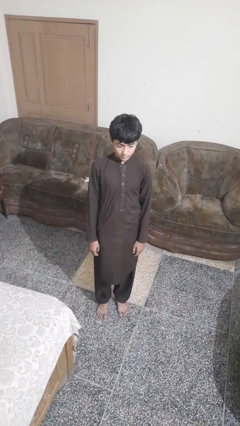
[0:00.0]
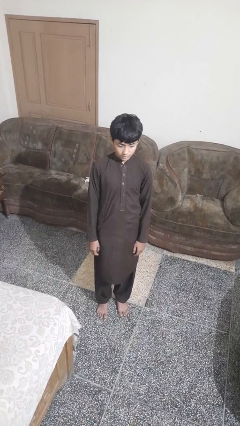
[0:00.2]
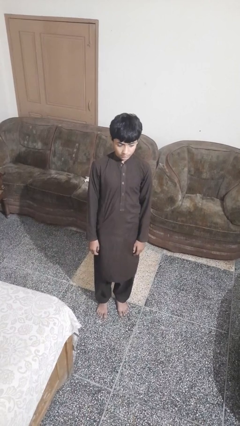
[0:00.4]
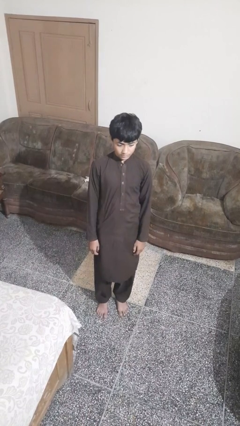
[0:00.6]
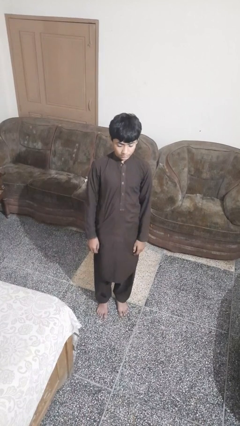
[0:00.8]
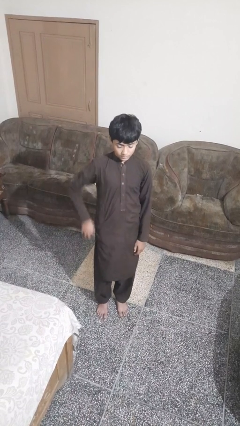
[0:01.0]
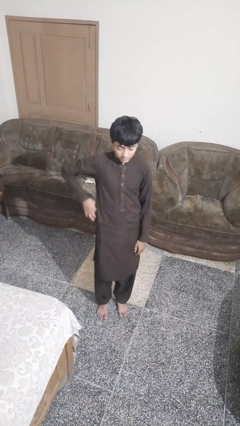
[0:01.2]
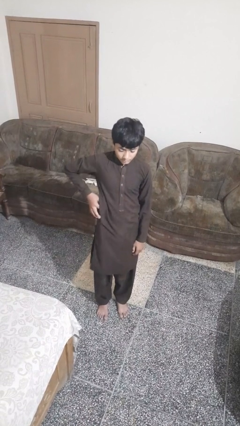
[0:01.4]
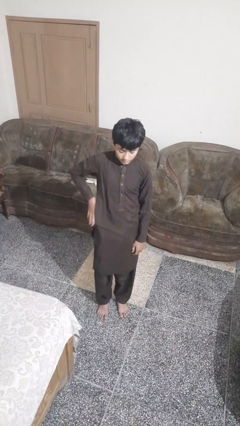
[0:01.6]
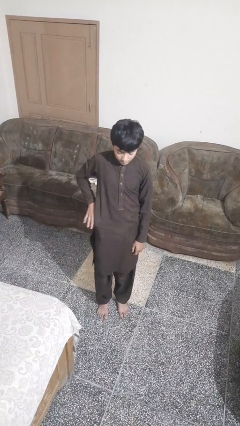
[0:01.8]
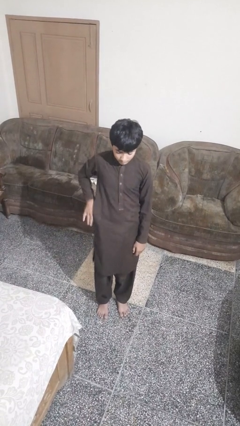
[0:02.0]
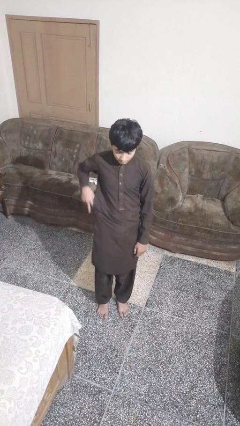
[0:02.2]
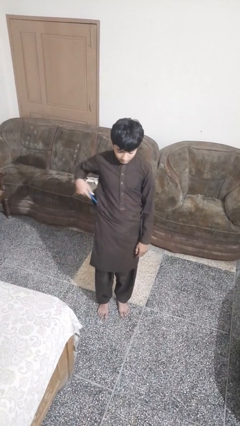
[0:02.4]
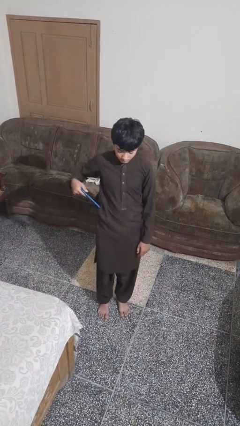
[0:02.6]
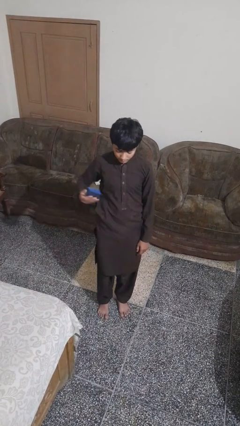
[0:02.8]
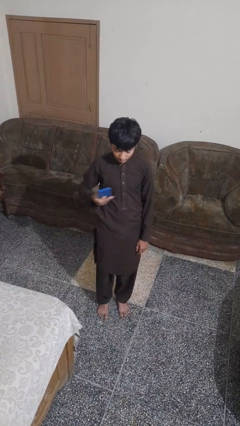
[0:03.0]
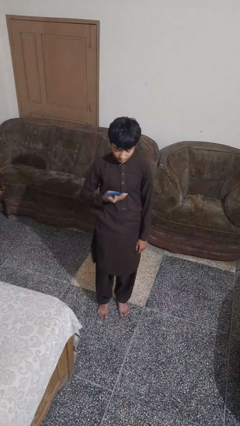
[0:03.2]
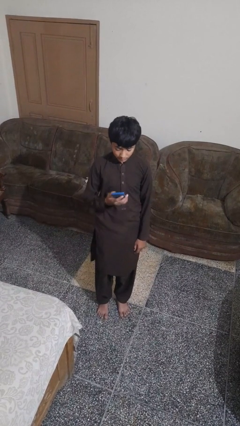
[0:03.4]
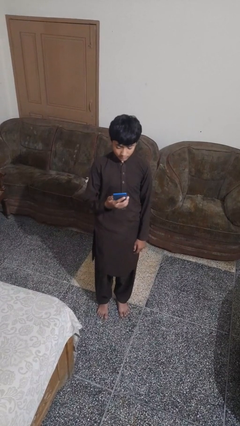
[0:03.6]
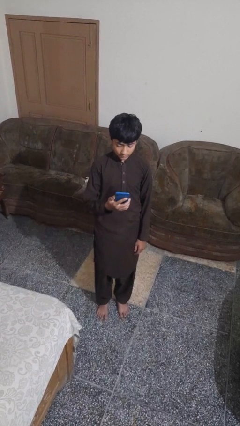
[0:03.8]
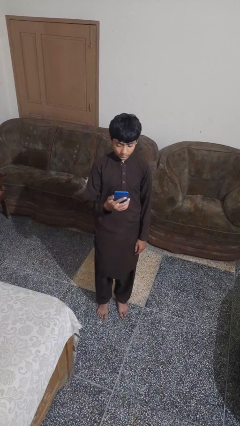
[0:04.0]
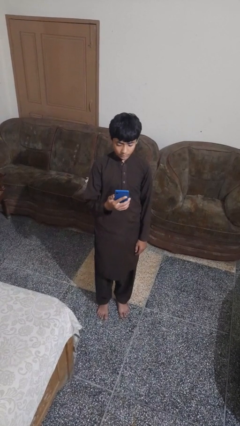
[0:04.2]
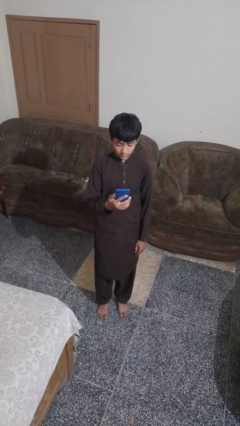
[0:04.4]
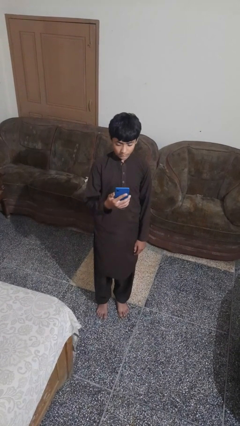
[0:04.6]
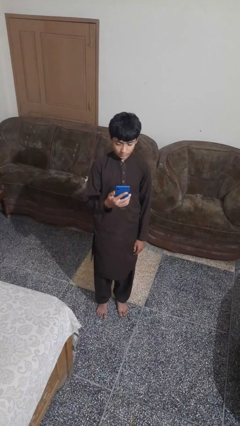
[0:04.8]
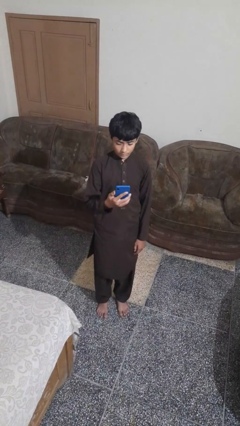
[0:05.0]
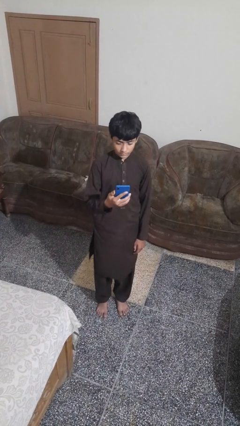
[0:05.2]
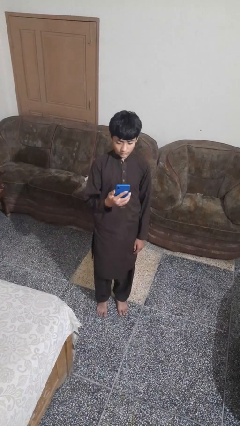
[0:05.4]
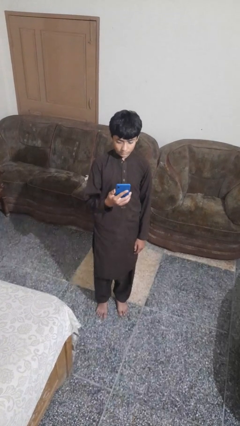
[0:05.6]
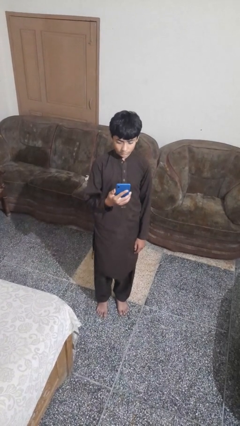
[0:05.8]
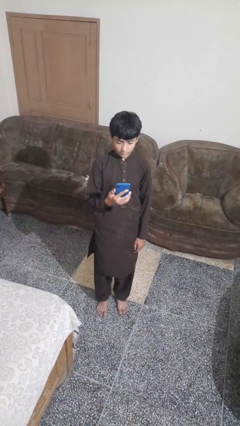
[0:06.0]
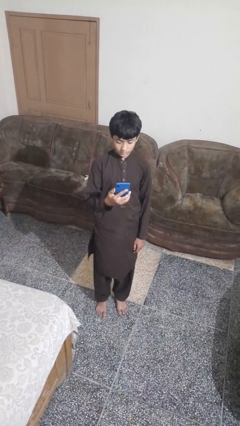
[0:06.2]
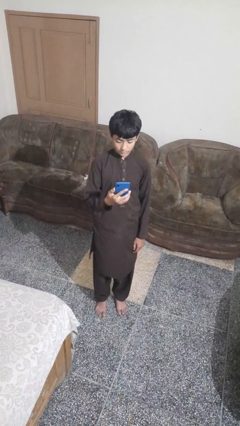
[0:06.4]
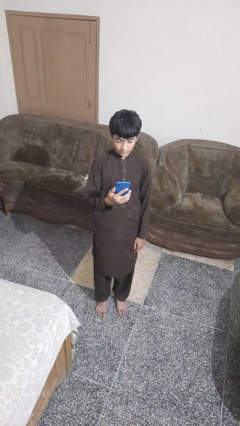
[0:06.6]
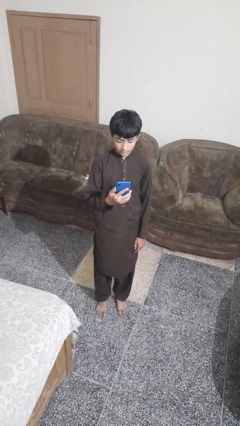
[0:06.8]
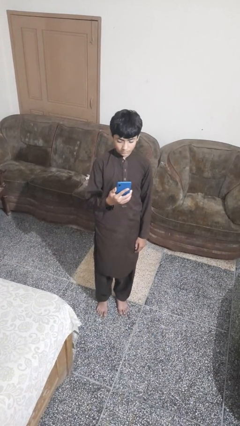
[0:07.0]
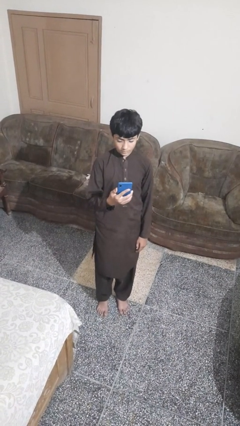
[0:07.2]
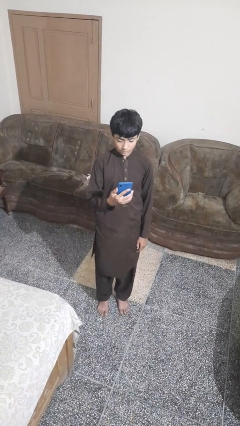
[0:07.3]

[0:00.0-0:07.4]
person takes phone from pocket

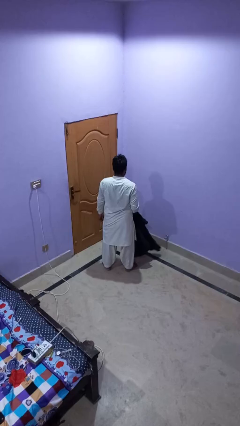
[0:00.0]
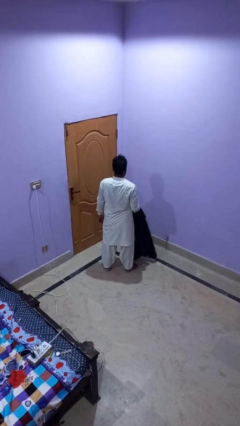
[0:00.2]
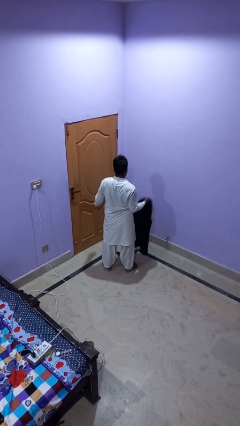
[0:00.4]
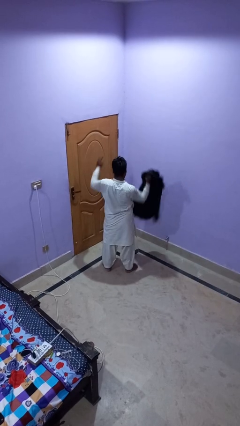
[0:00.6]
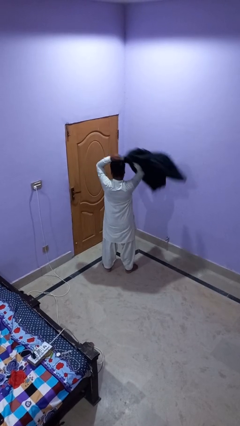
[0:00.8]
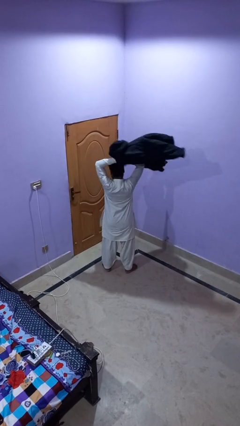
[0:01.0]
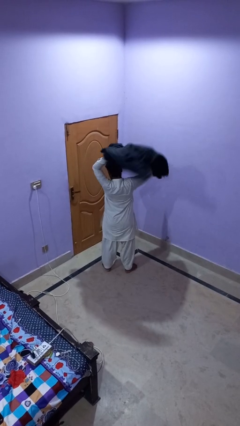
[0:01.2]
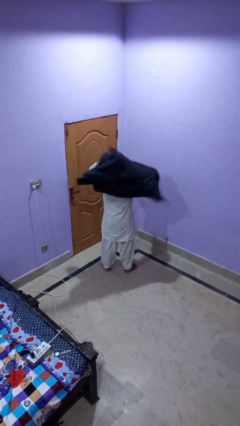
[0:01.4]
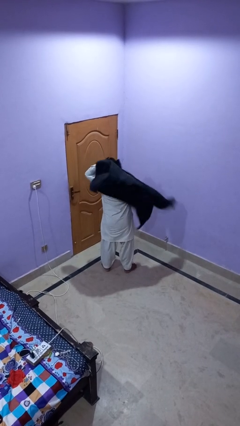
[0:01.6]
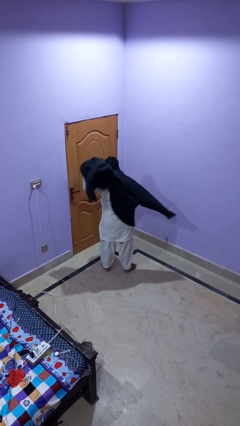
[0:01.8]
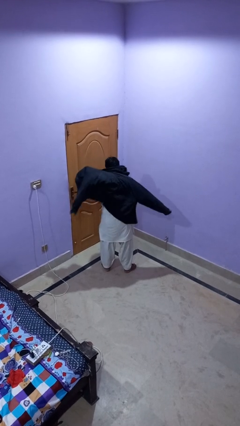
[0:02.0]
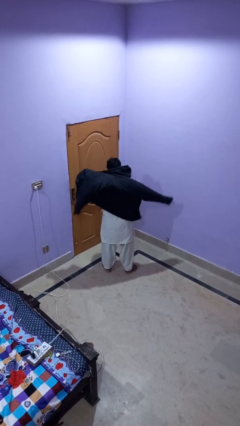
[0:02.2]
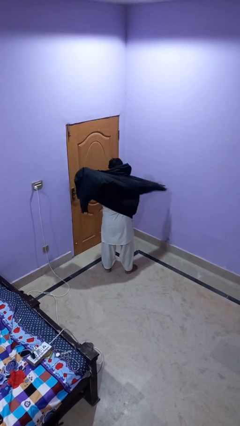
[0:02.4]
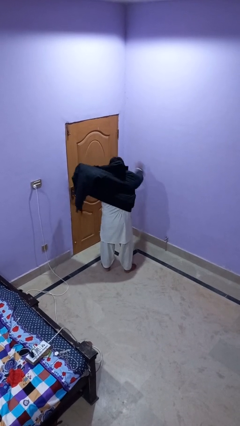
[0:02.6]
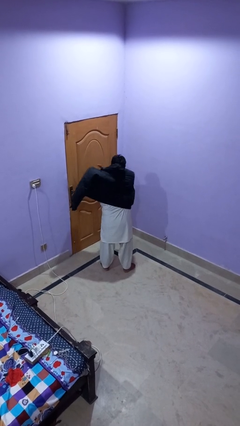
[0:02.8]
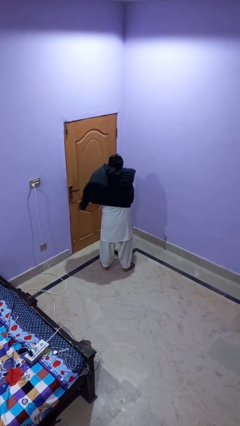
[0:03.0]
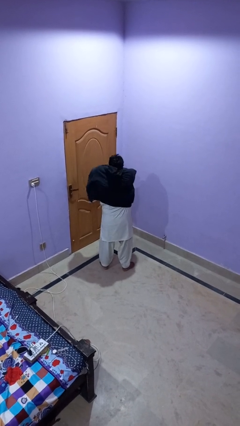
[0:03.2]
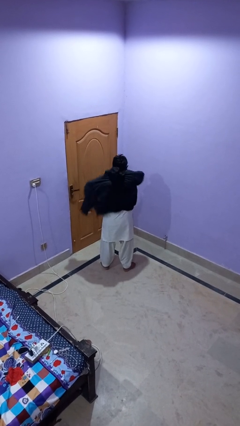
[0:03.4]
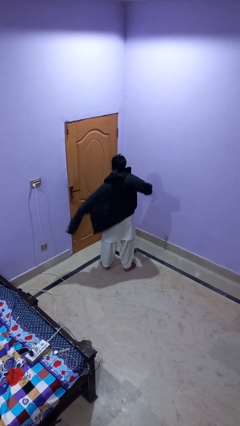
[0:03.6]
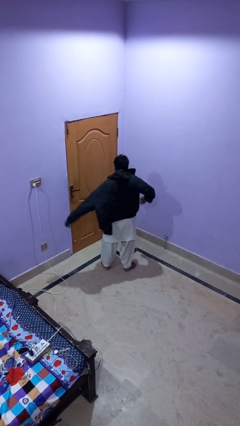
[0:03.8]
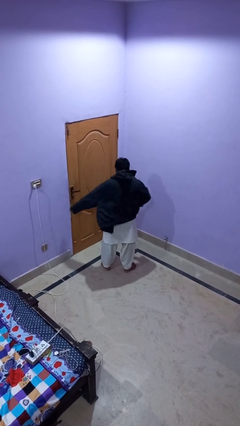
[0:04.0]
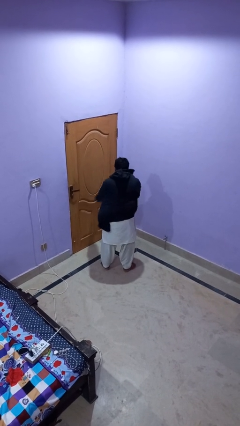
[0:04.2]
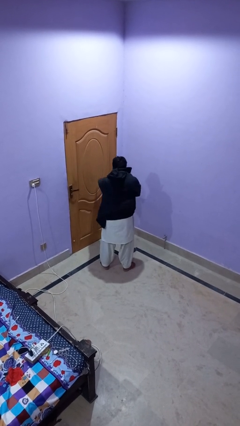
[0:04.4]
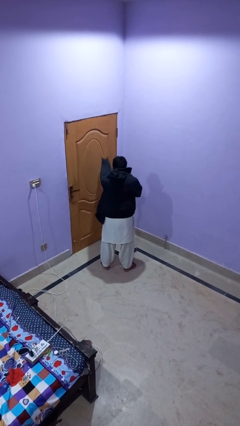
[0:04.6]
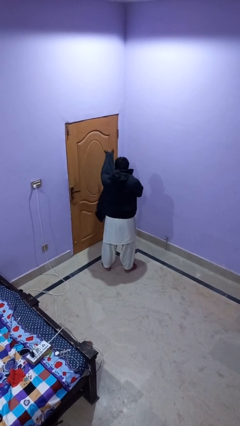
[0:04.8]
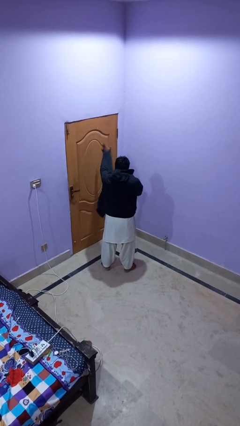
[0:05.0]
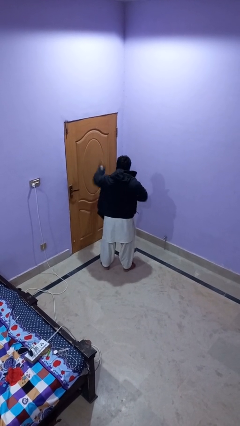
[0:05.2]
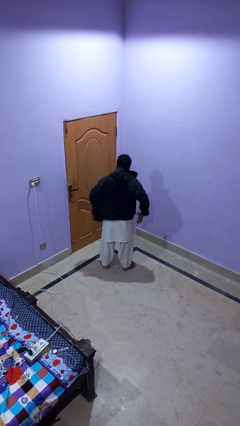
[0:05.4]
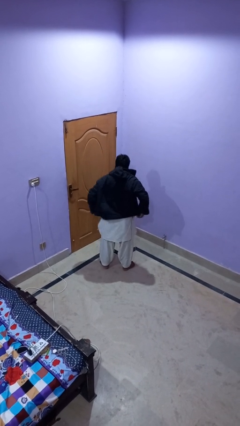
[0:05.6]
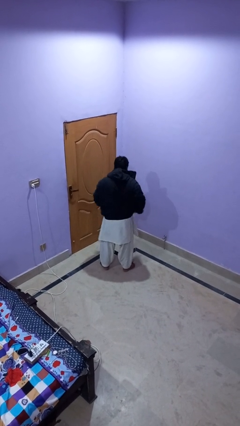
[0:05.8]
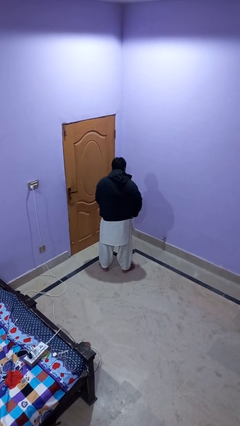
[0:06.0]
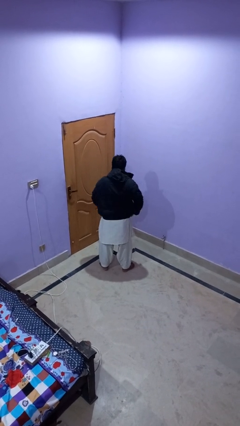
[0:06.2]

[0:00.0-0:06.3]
person puts on jacket

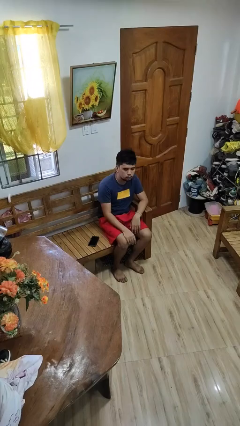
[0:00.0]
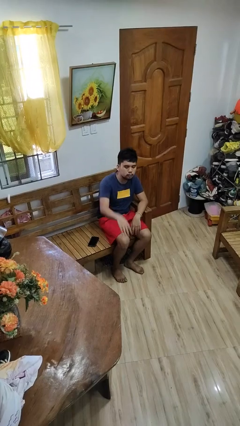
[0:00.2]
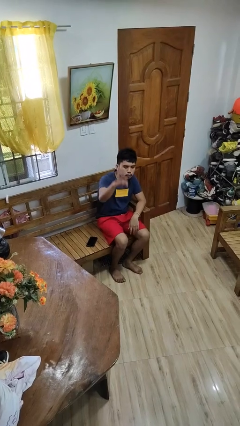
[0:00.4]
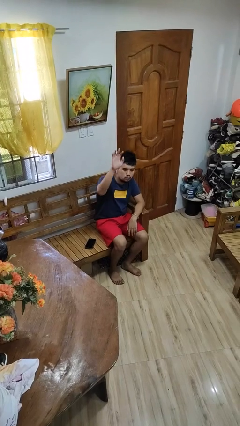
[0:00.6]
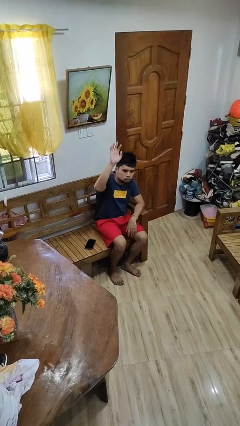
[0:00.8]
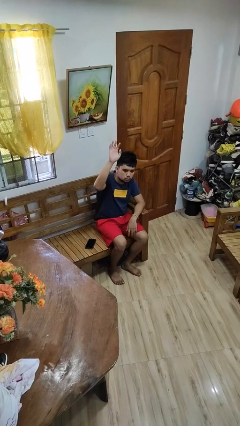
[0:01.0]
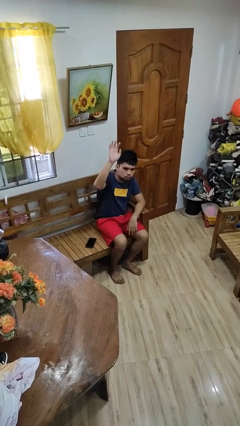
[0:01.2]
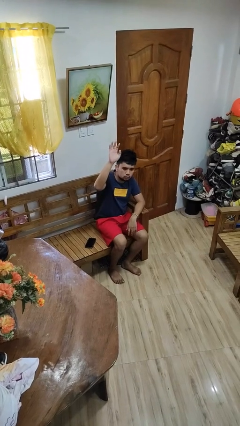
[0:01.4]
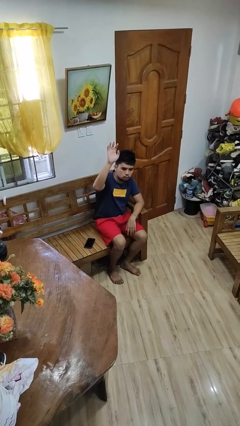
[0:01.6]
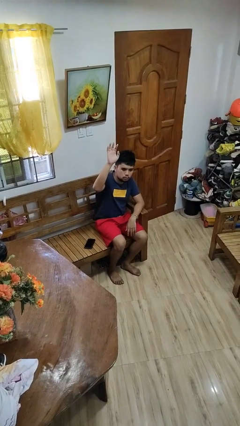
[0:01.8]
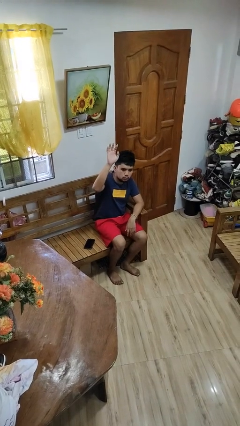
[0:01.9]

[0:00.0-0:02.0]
person gestures raise hand

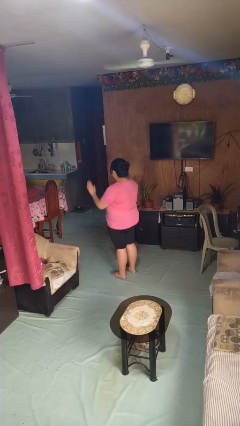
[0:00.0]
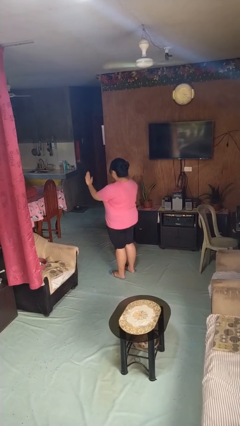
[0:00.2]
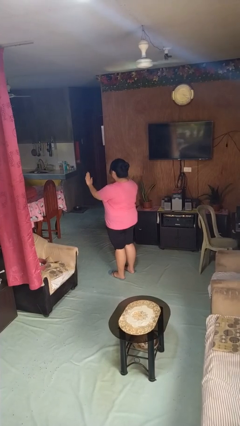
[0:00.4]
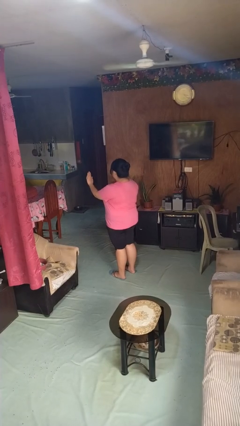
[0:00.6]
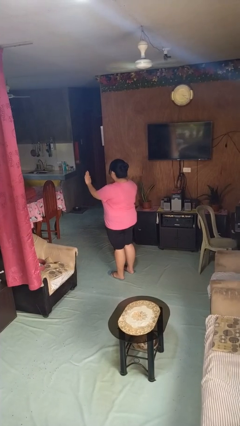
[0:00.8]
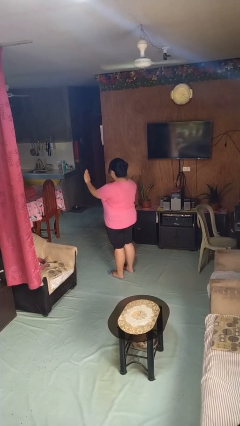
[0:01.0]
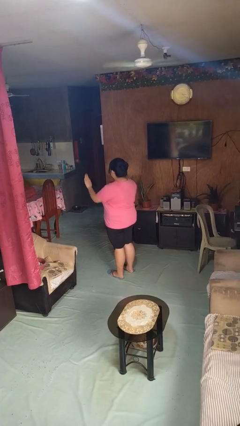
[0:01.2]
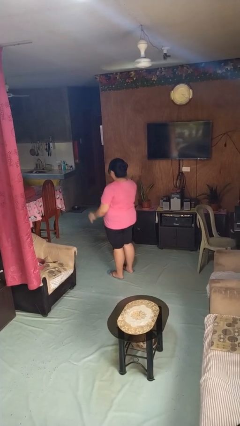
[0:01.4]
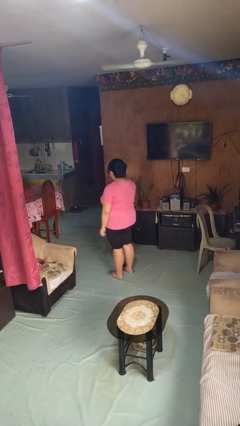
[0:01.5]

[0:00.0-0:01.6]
person gestures stop

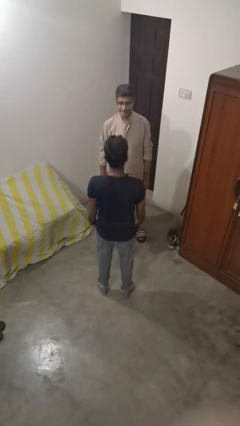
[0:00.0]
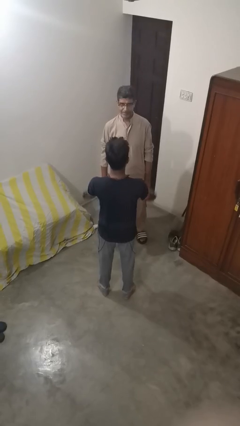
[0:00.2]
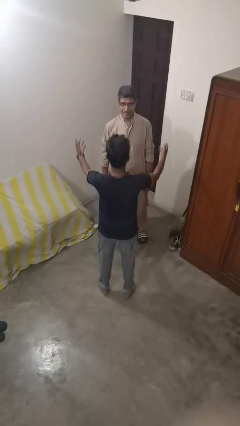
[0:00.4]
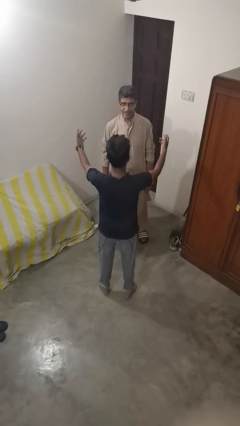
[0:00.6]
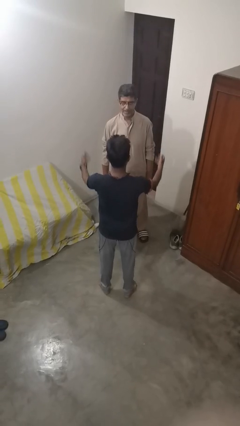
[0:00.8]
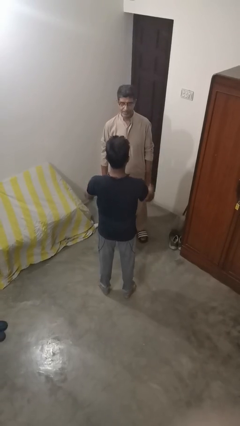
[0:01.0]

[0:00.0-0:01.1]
person laughs with person
